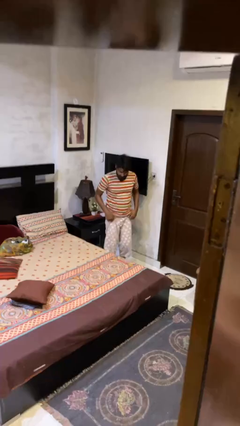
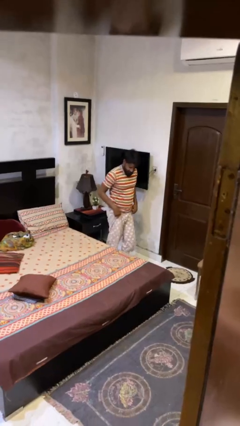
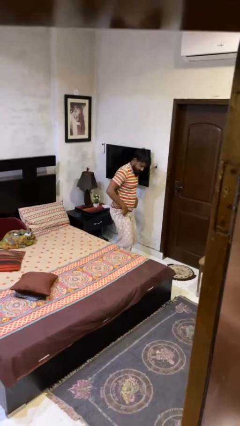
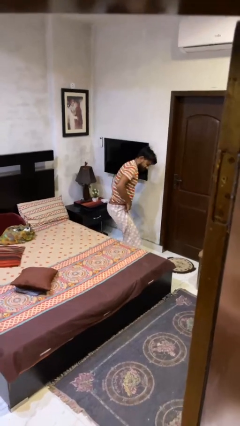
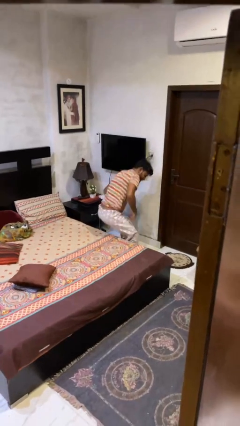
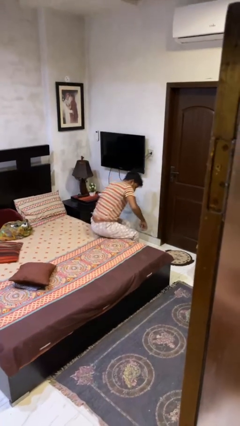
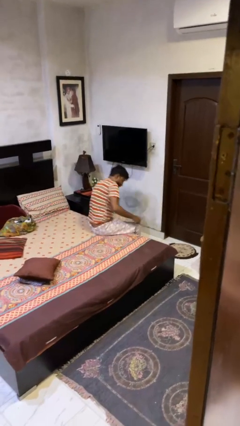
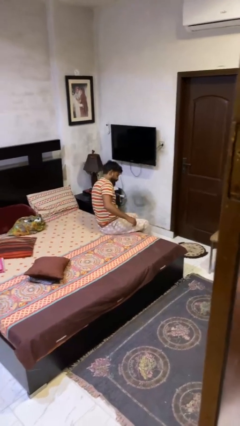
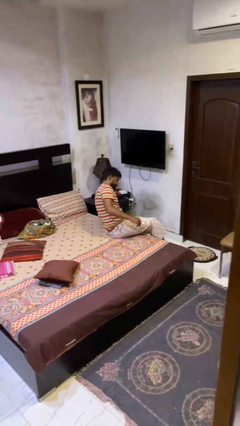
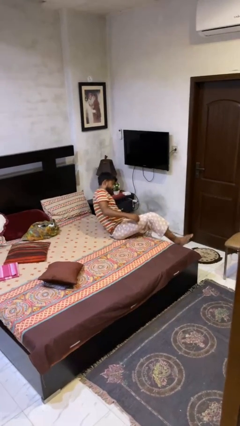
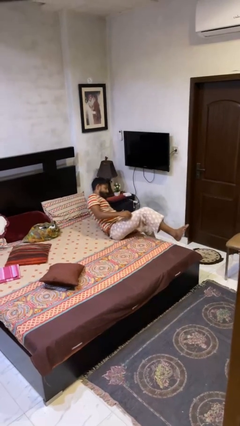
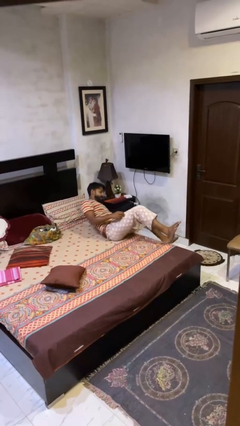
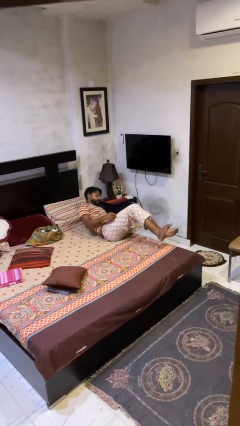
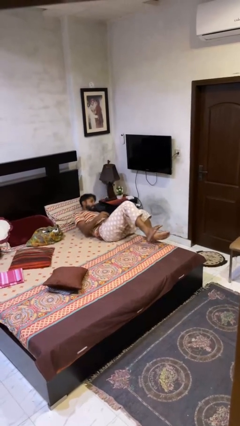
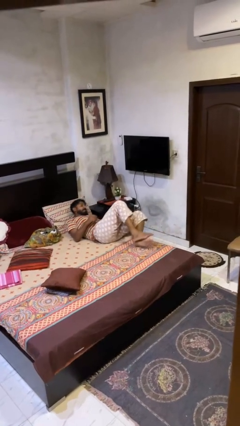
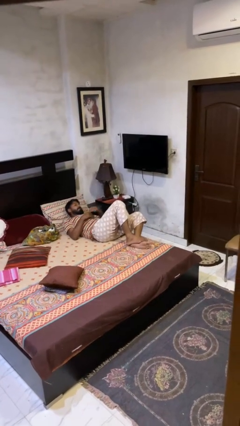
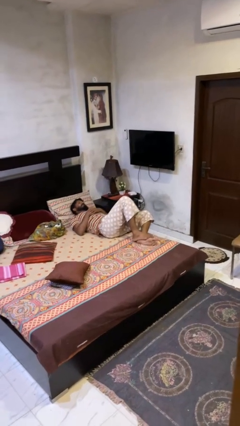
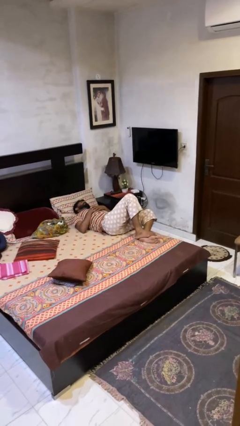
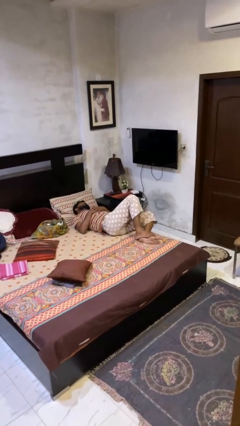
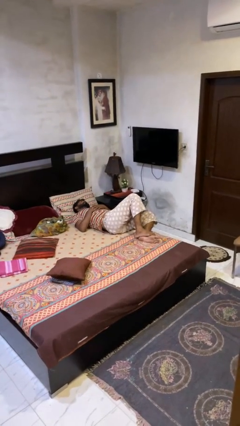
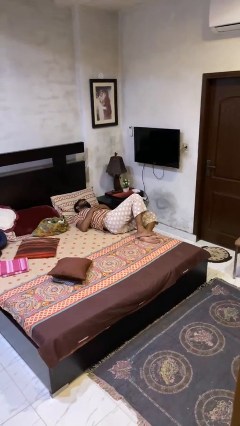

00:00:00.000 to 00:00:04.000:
person lies down on bed

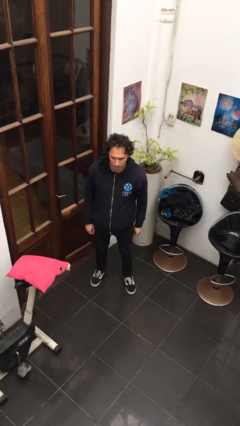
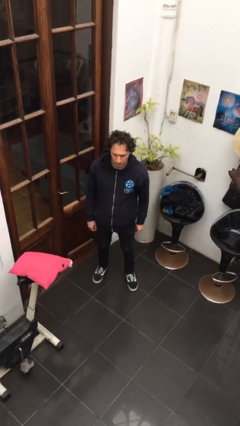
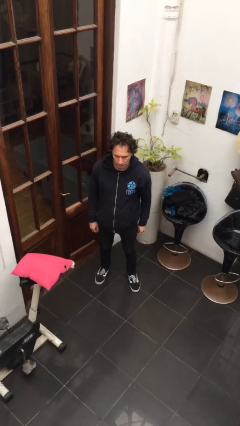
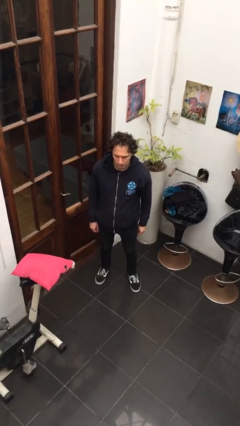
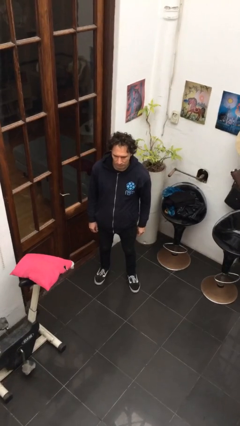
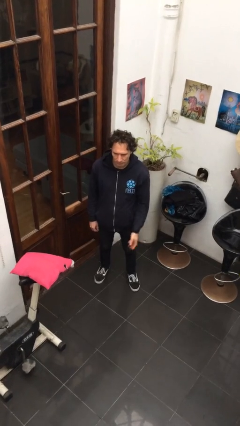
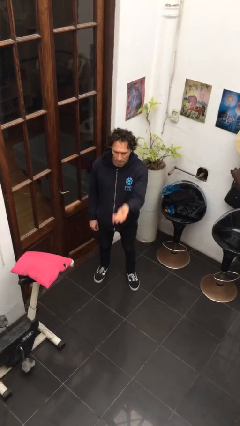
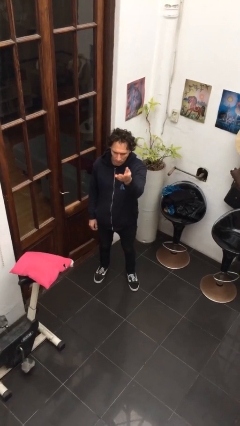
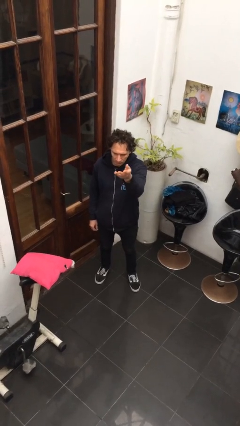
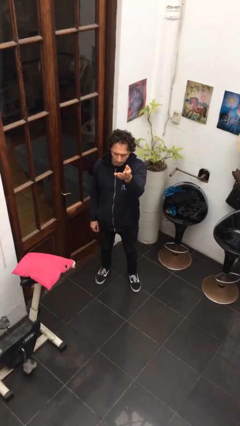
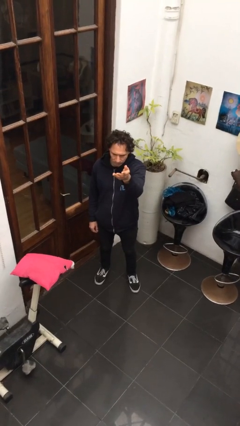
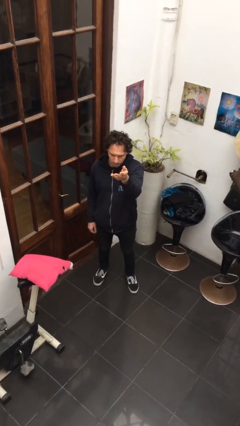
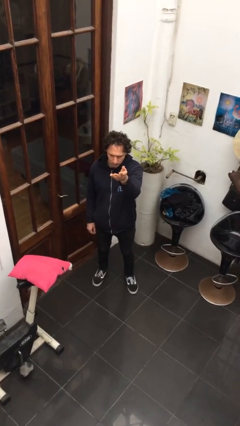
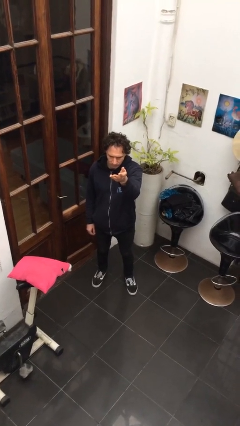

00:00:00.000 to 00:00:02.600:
person gestures swipe up

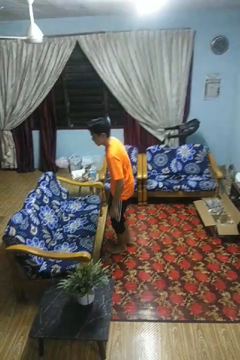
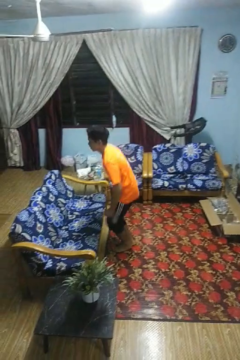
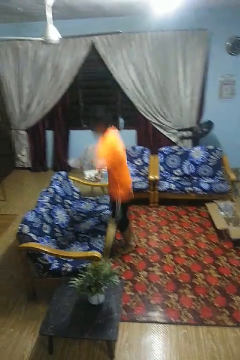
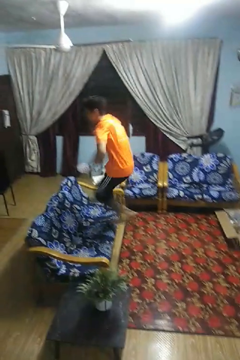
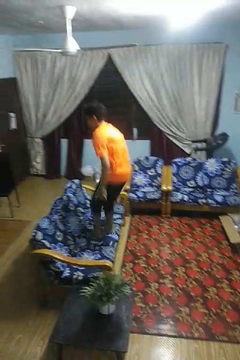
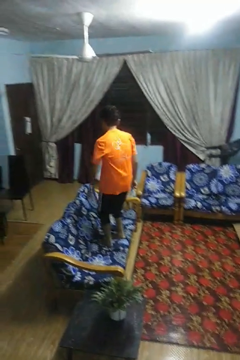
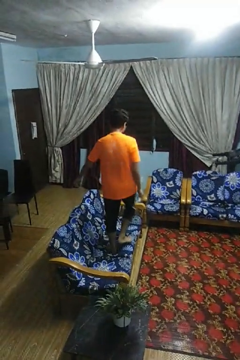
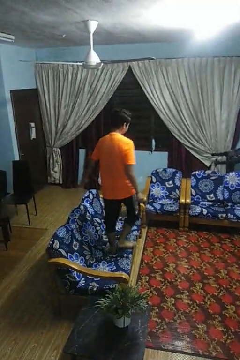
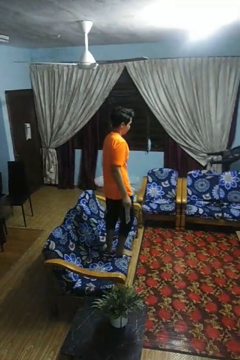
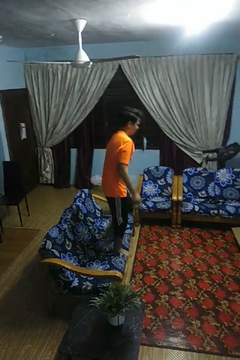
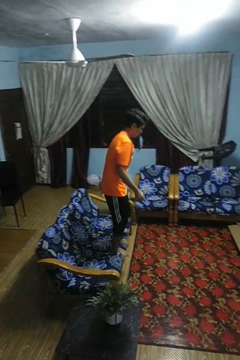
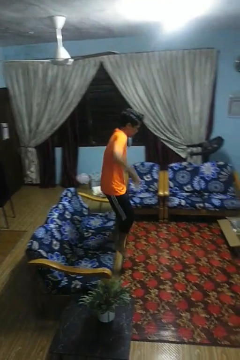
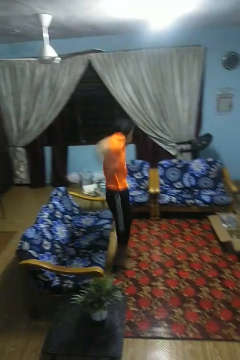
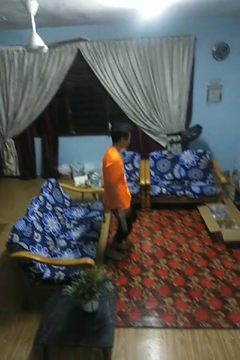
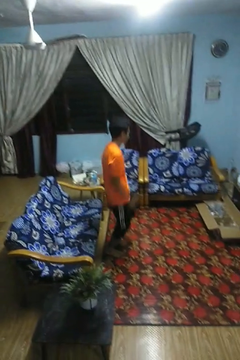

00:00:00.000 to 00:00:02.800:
person jumps on couch

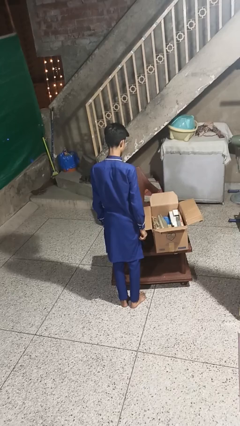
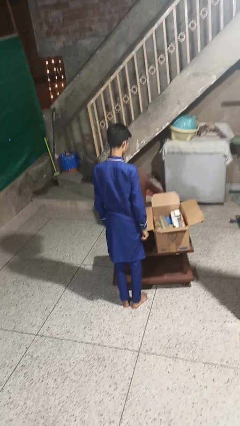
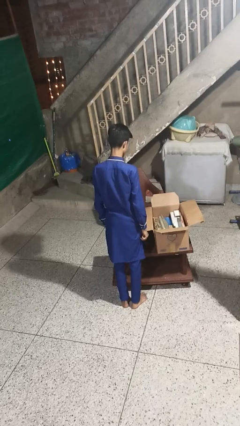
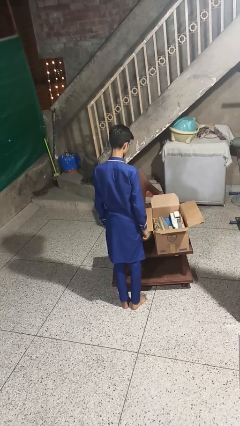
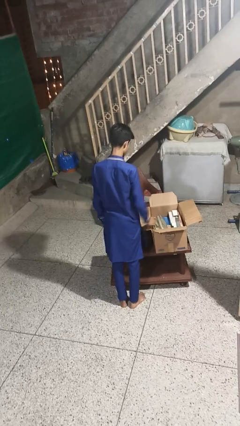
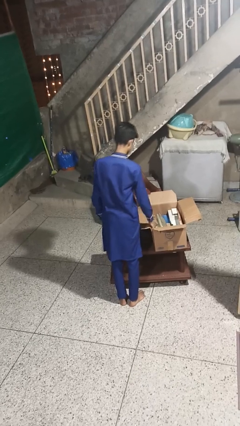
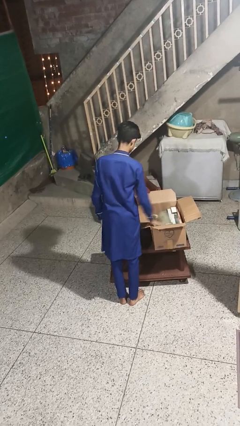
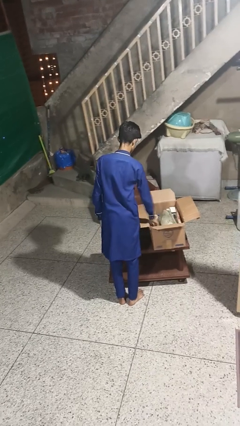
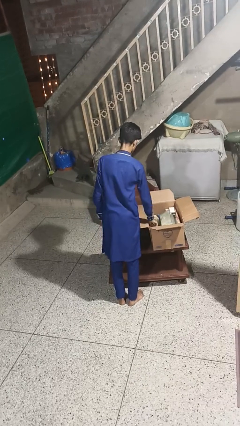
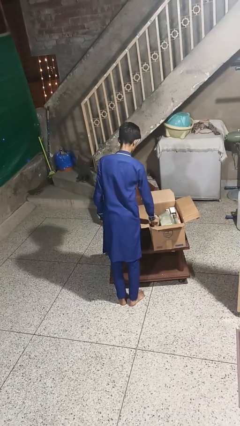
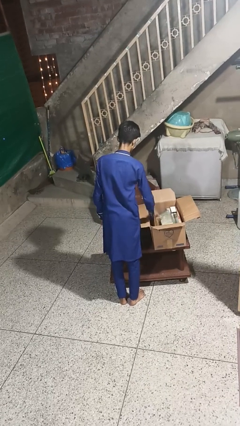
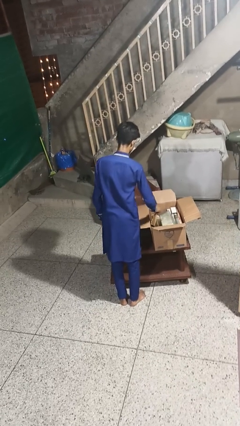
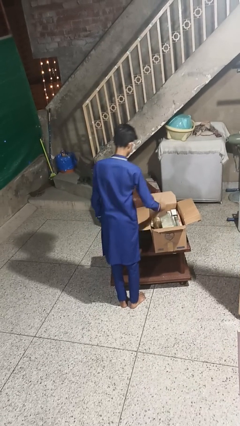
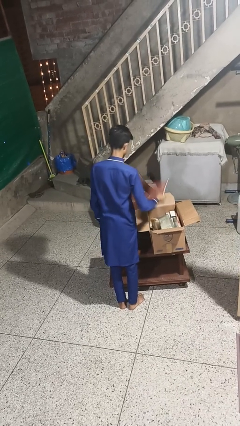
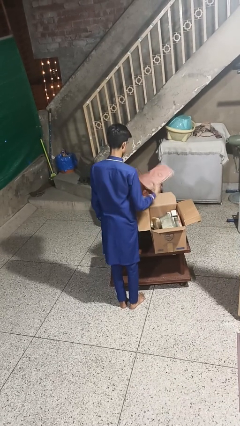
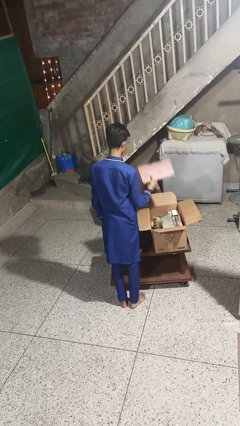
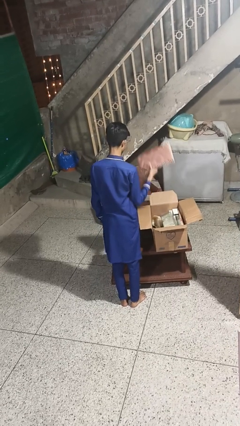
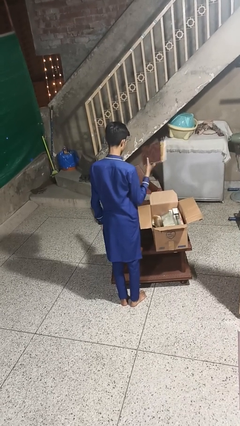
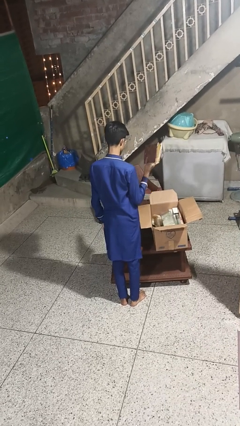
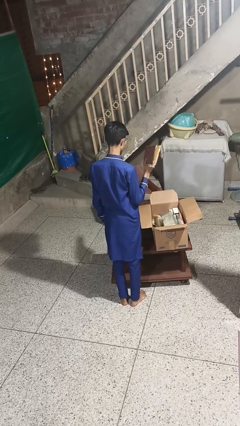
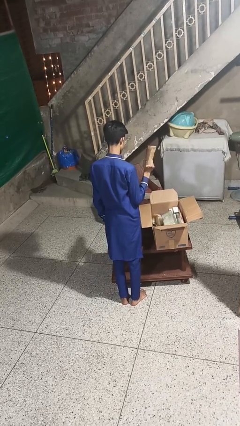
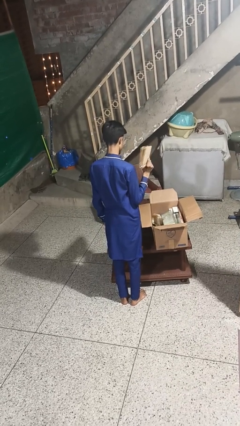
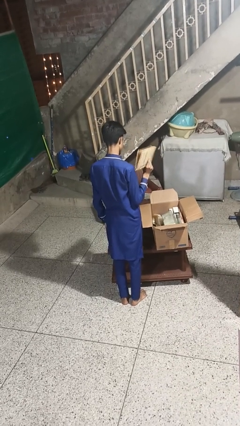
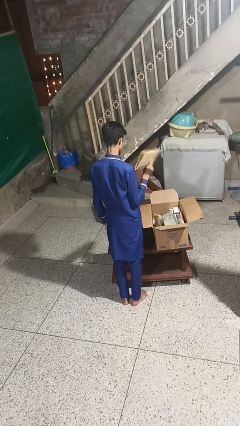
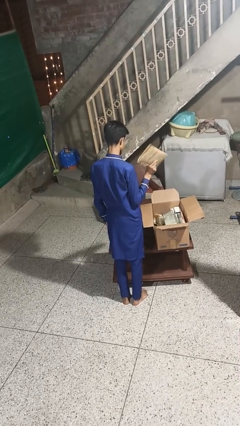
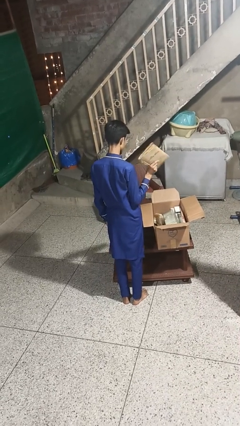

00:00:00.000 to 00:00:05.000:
person takes object from box

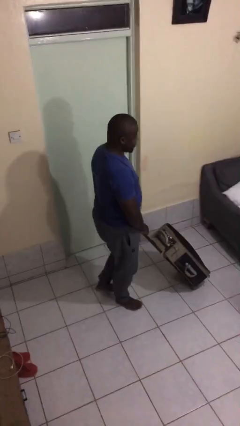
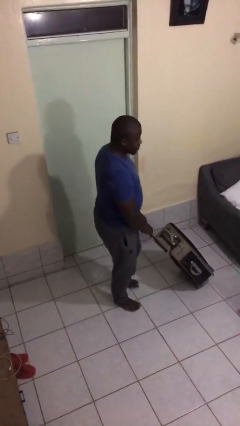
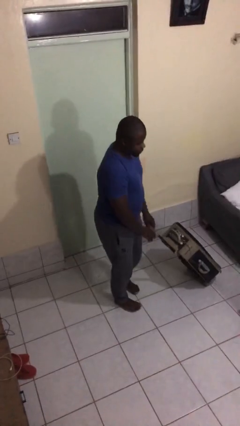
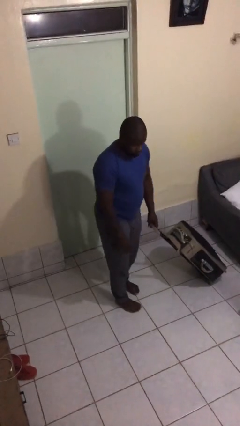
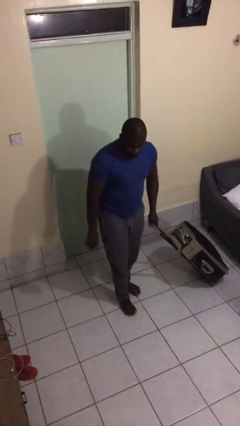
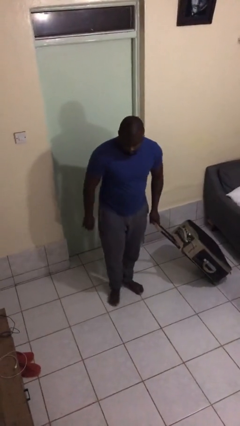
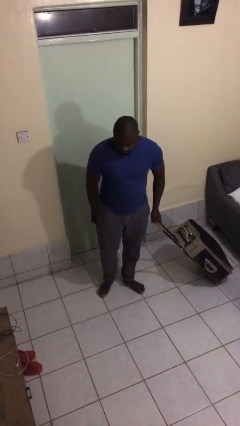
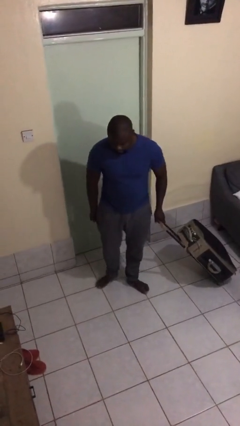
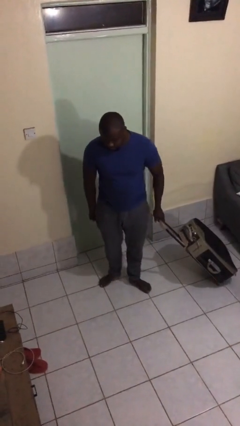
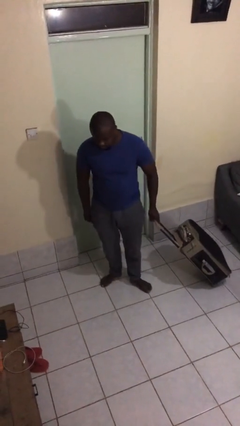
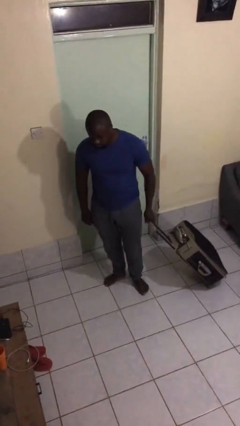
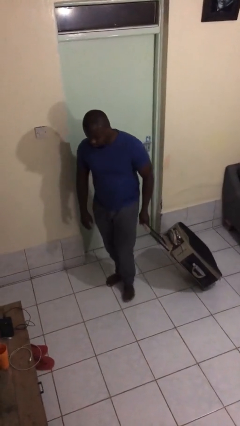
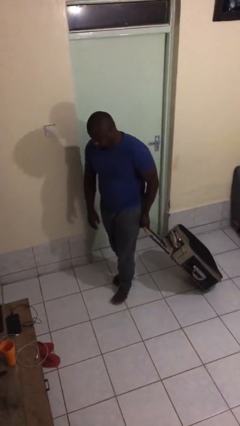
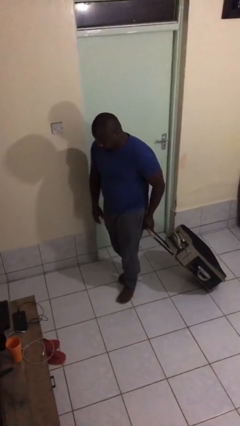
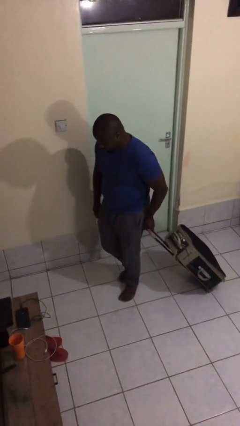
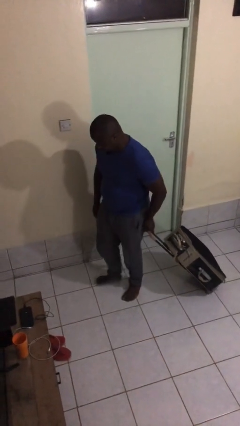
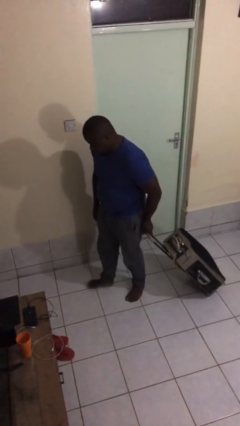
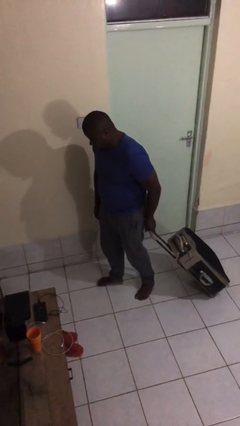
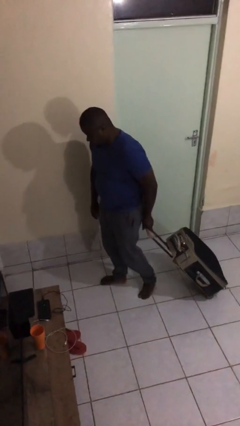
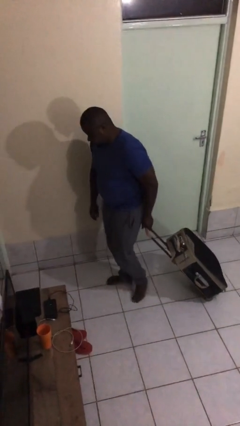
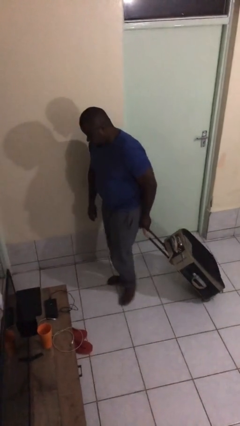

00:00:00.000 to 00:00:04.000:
person pulls wheeled cart
